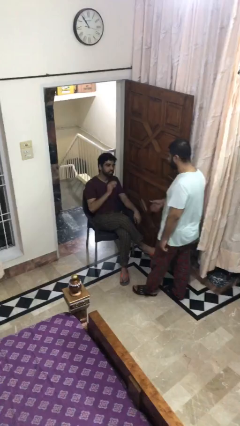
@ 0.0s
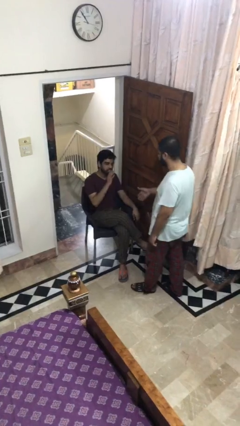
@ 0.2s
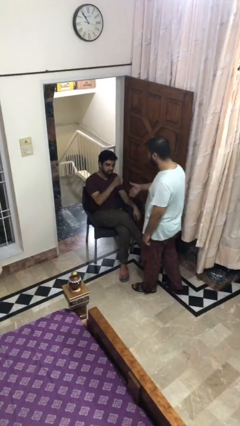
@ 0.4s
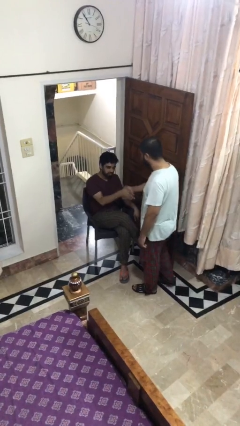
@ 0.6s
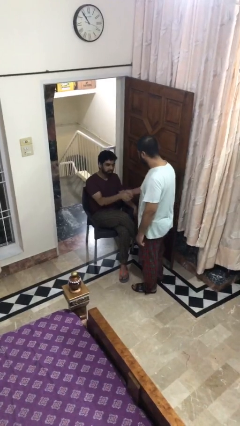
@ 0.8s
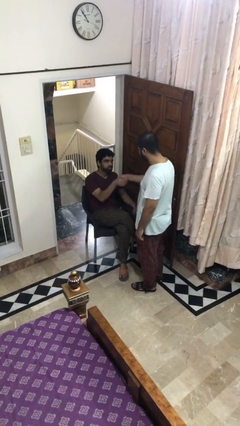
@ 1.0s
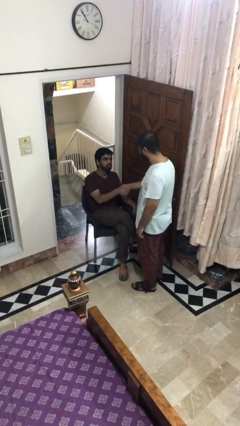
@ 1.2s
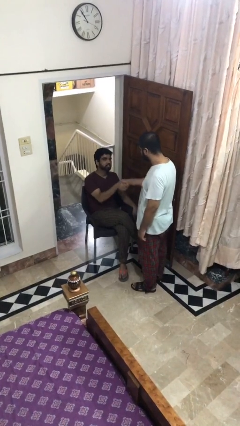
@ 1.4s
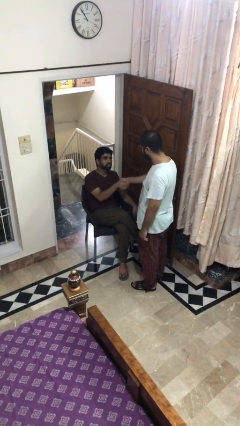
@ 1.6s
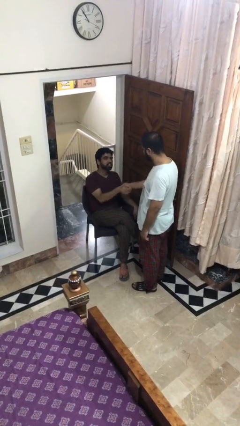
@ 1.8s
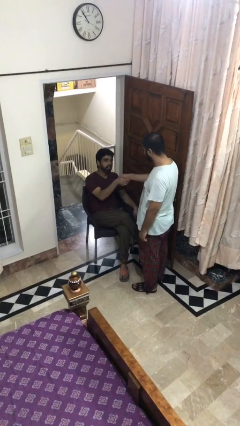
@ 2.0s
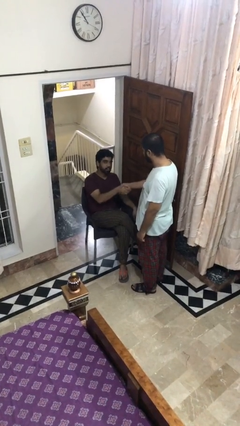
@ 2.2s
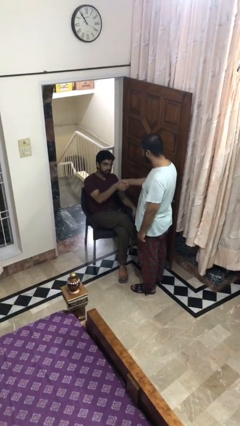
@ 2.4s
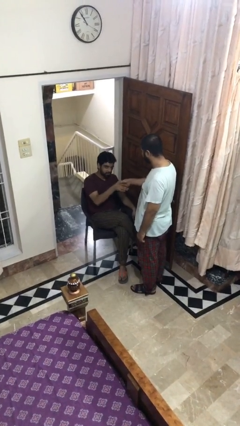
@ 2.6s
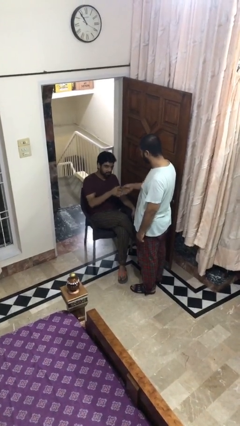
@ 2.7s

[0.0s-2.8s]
person shakes hand

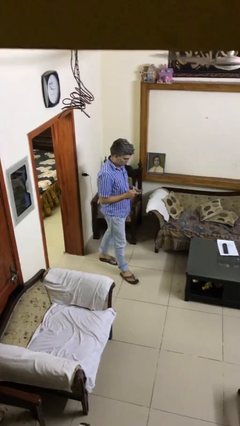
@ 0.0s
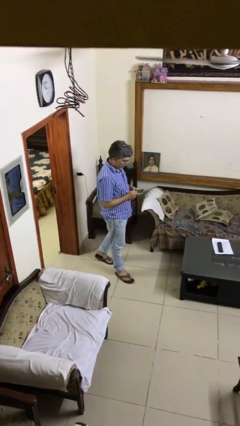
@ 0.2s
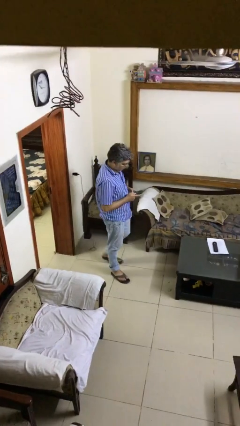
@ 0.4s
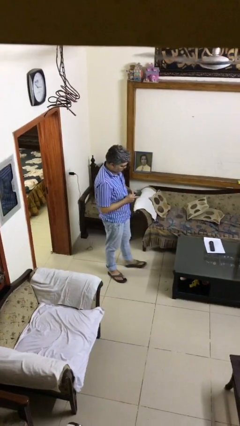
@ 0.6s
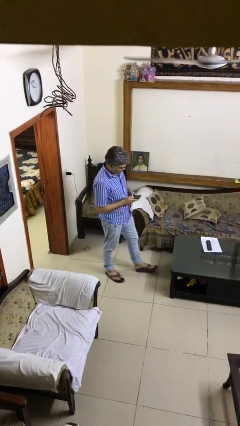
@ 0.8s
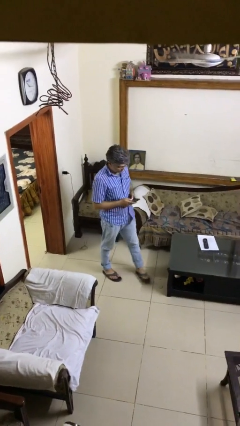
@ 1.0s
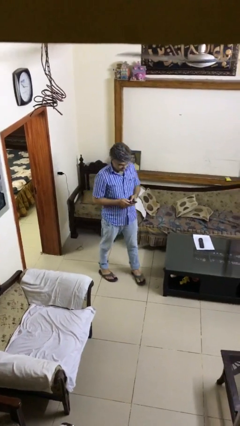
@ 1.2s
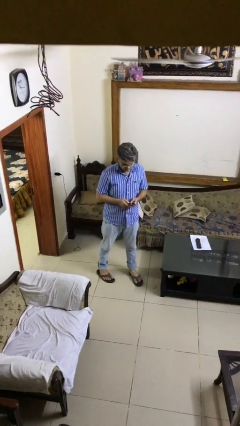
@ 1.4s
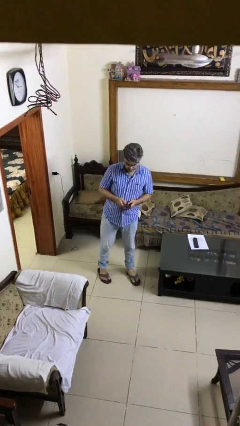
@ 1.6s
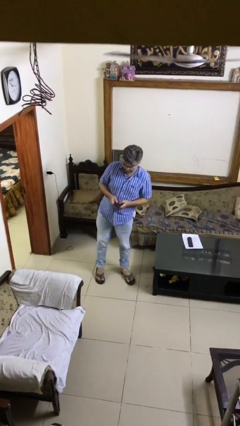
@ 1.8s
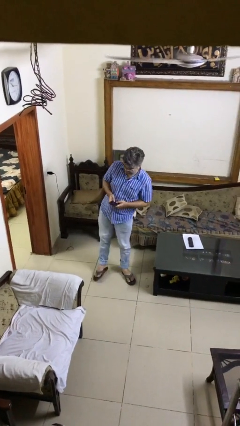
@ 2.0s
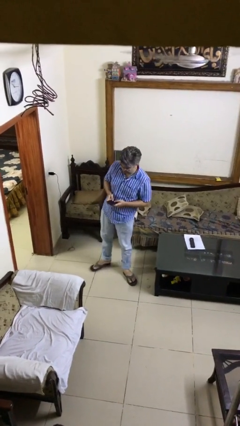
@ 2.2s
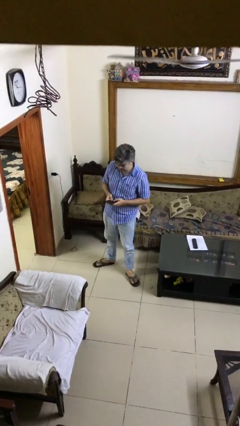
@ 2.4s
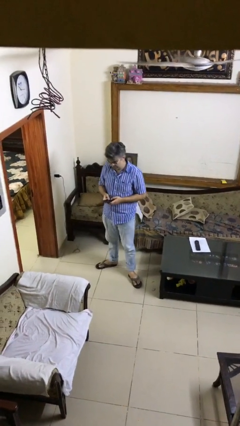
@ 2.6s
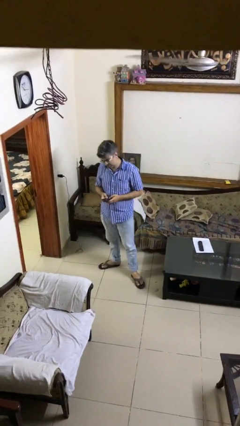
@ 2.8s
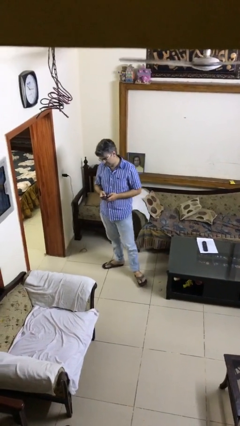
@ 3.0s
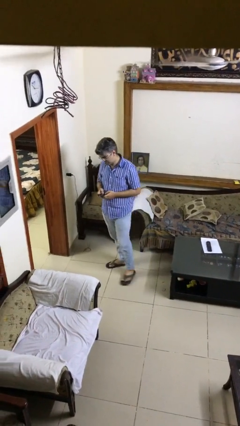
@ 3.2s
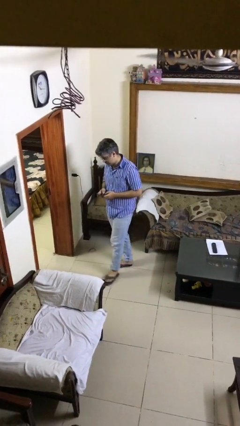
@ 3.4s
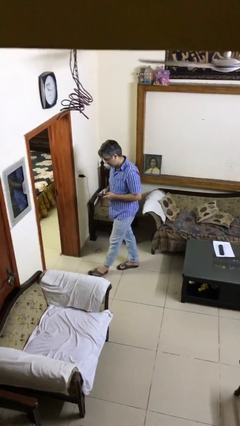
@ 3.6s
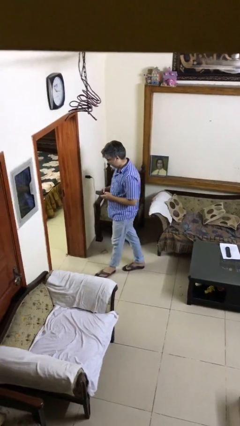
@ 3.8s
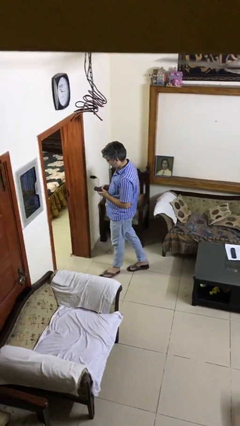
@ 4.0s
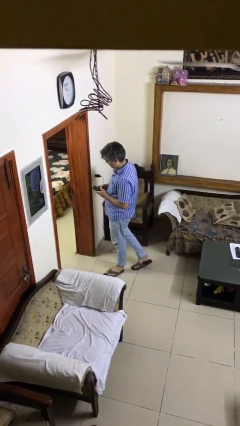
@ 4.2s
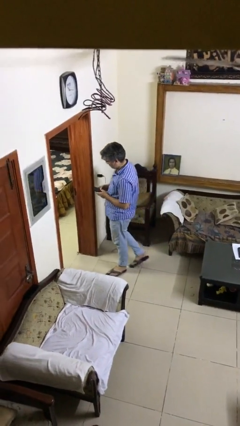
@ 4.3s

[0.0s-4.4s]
person texts on phone

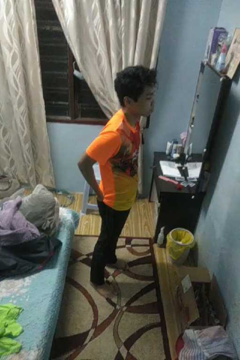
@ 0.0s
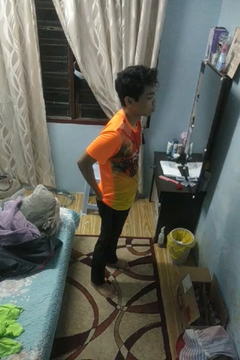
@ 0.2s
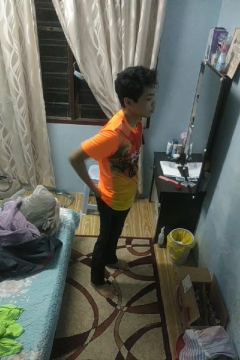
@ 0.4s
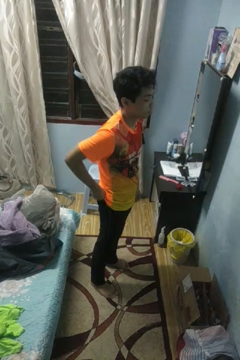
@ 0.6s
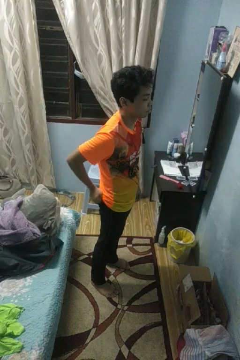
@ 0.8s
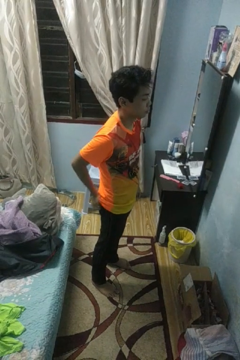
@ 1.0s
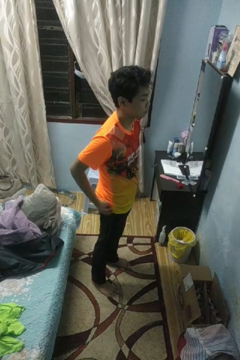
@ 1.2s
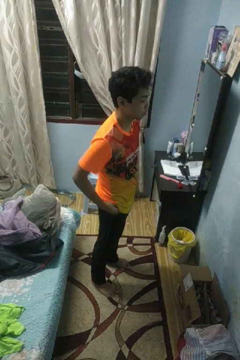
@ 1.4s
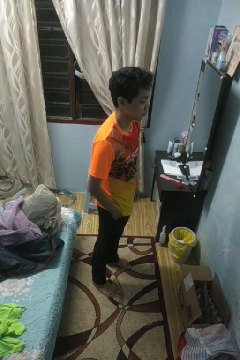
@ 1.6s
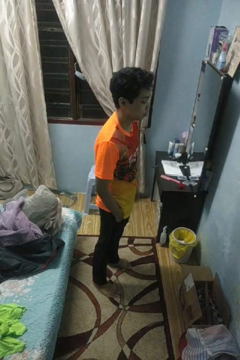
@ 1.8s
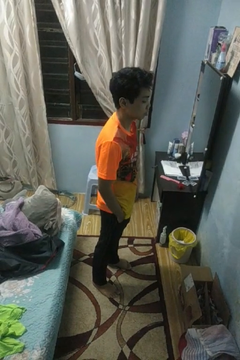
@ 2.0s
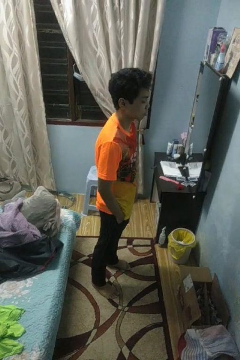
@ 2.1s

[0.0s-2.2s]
person puts hands in back pockets

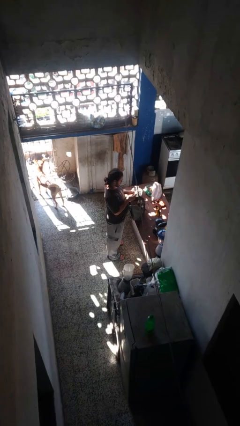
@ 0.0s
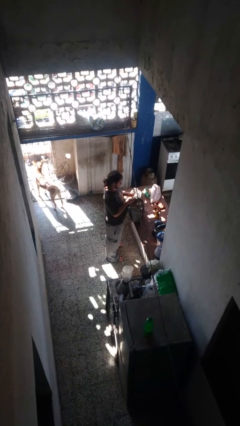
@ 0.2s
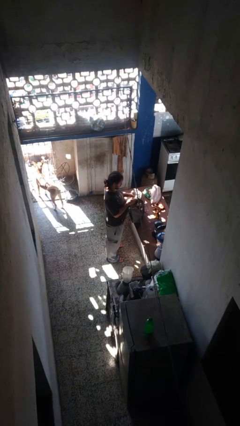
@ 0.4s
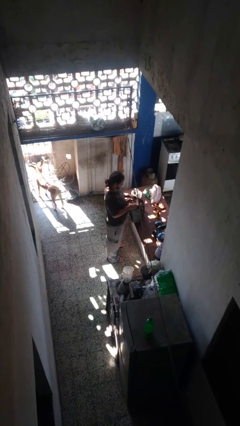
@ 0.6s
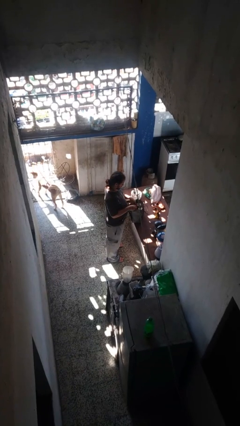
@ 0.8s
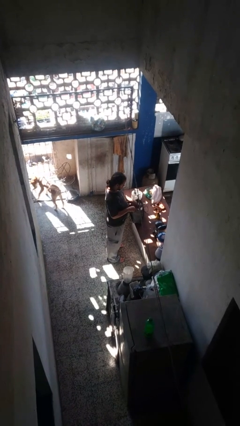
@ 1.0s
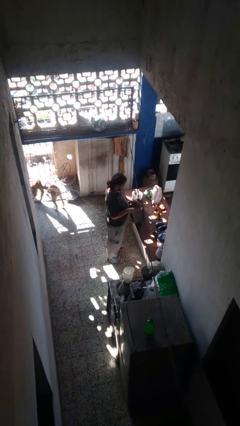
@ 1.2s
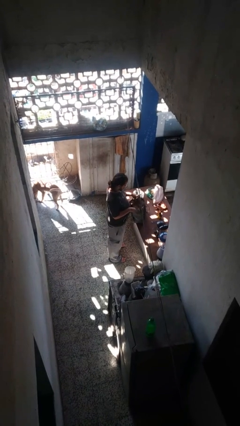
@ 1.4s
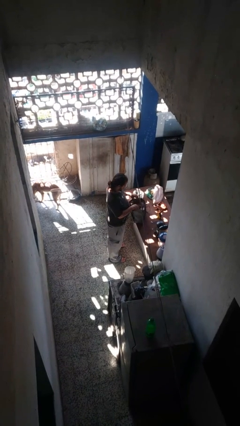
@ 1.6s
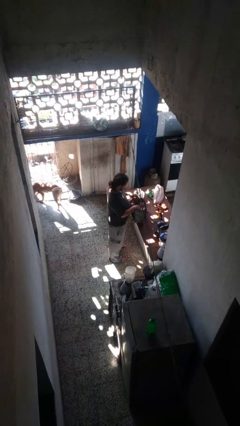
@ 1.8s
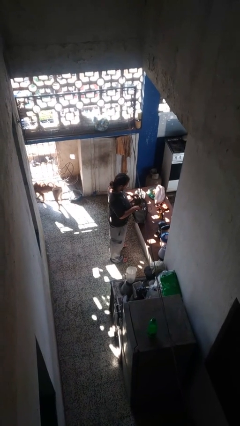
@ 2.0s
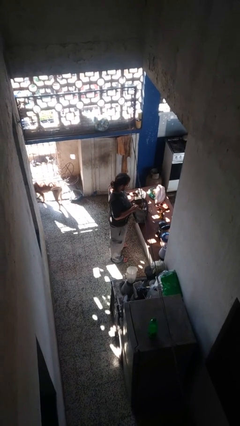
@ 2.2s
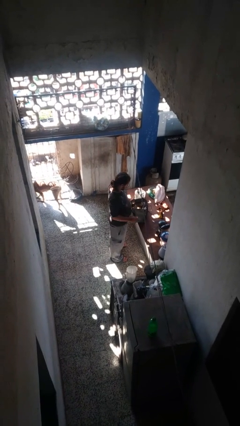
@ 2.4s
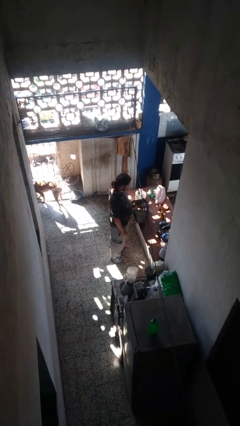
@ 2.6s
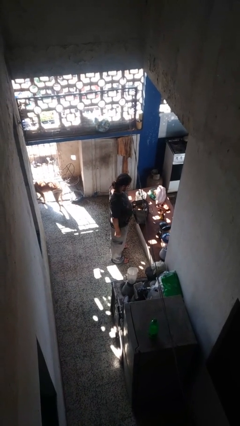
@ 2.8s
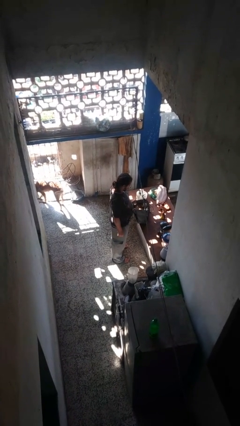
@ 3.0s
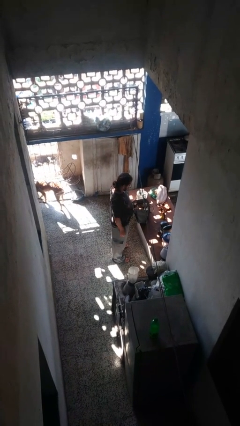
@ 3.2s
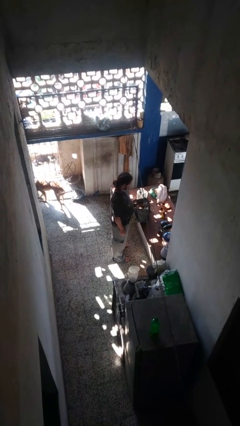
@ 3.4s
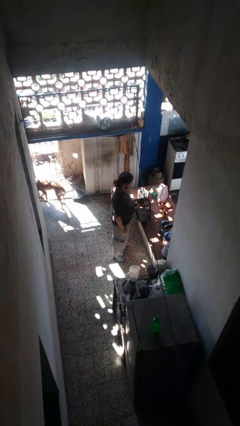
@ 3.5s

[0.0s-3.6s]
person puts object into purse

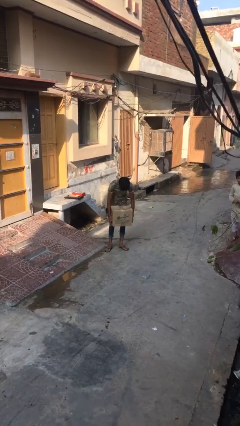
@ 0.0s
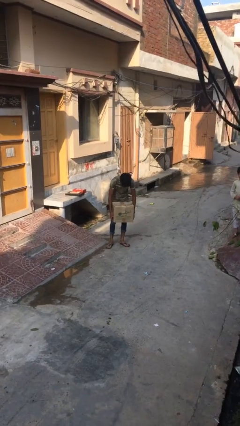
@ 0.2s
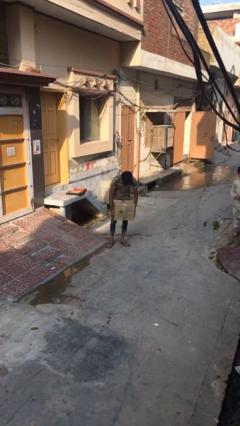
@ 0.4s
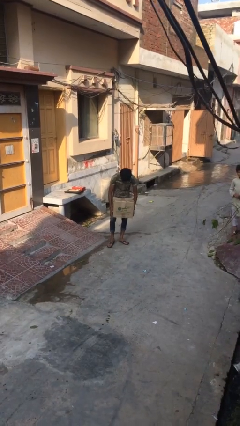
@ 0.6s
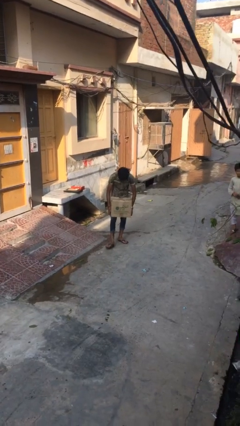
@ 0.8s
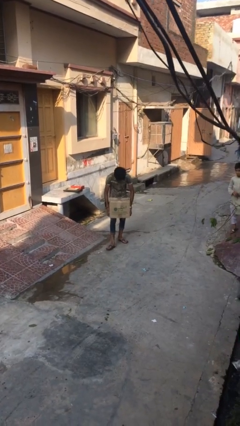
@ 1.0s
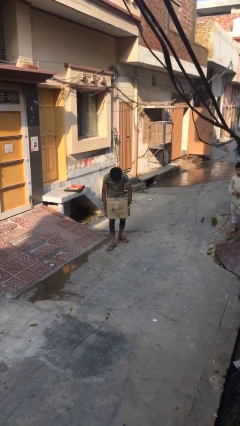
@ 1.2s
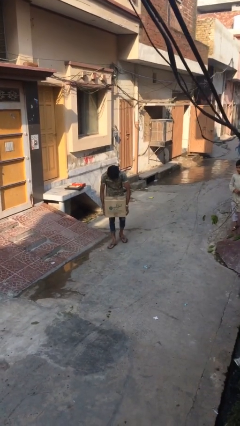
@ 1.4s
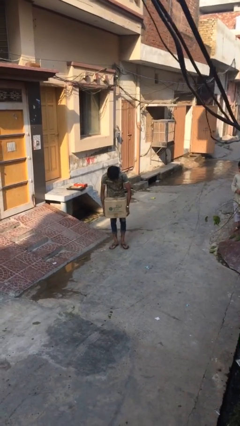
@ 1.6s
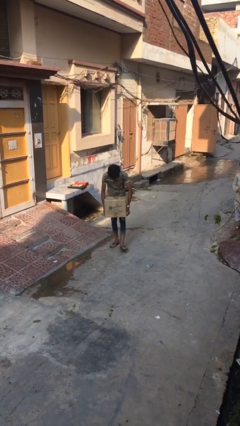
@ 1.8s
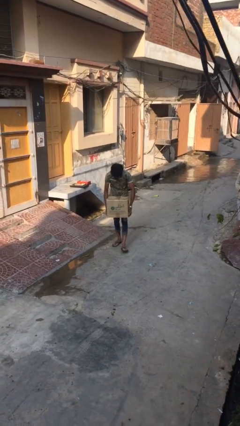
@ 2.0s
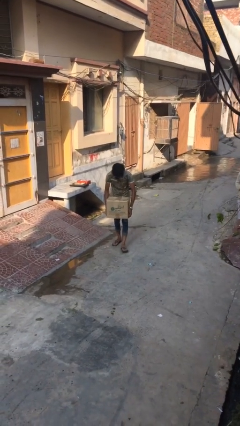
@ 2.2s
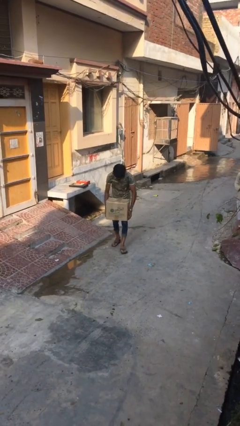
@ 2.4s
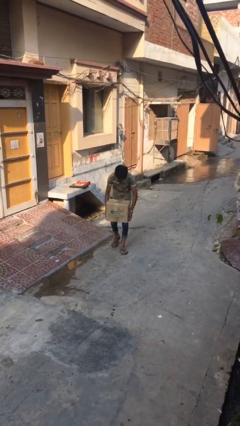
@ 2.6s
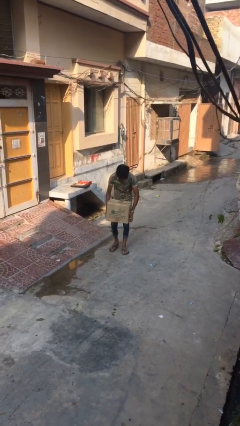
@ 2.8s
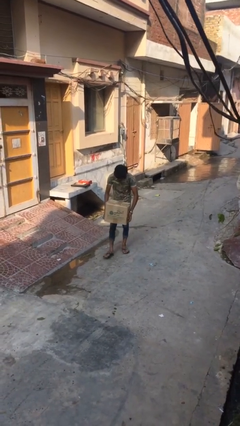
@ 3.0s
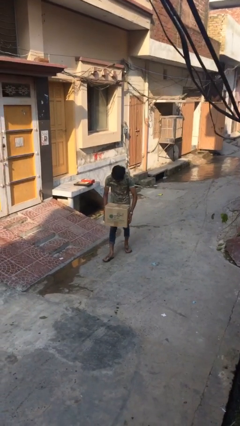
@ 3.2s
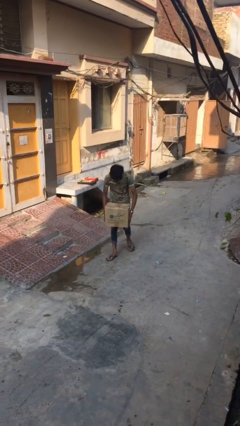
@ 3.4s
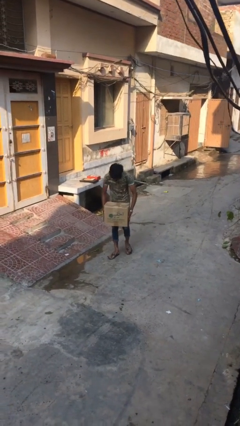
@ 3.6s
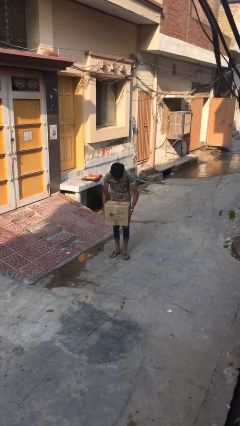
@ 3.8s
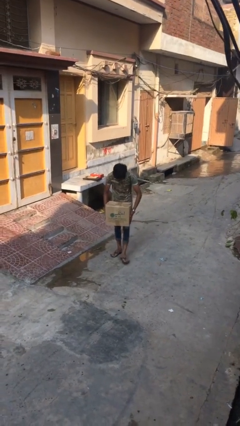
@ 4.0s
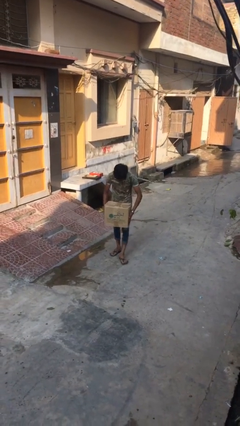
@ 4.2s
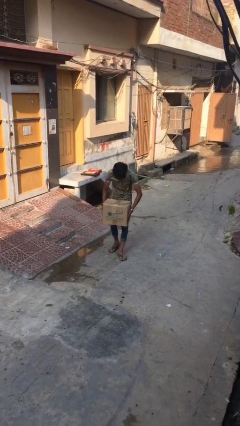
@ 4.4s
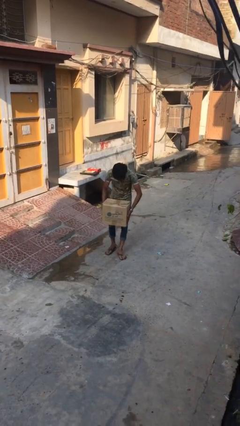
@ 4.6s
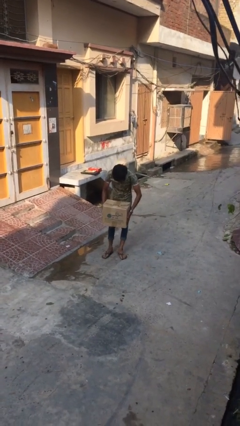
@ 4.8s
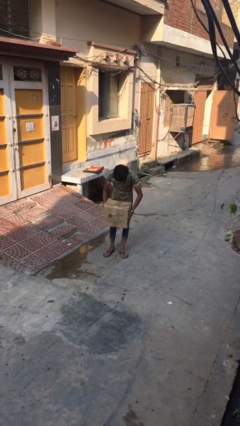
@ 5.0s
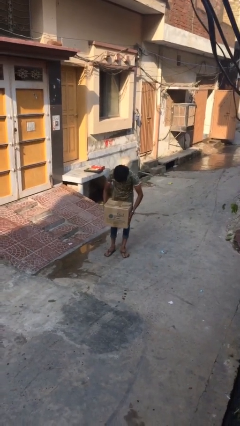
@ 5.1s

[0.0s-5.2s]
person carries heavy object
